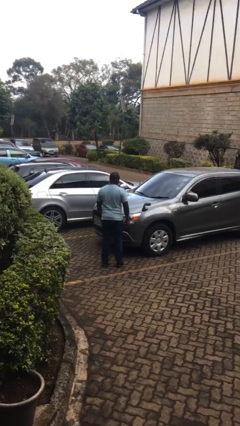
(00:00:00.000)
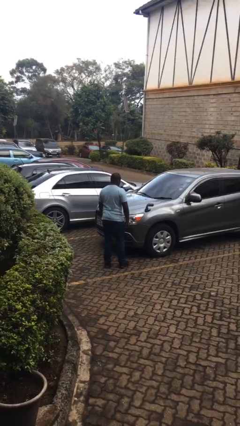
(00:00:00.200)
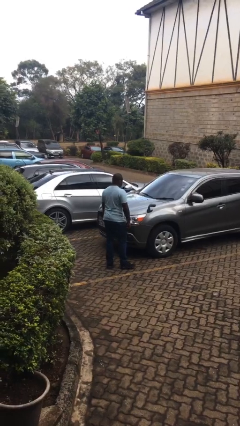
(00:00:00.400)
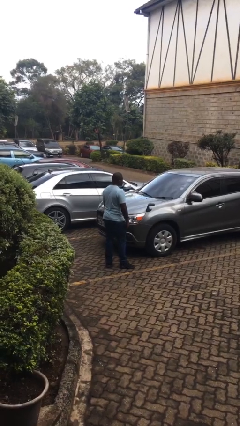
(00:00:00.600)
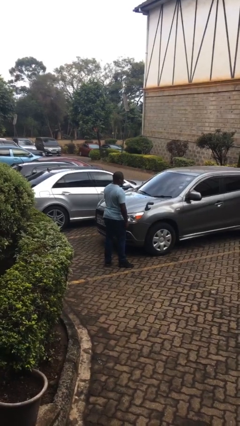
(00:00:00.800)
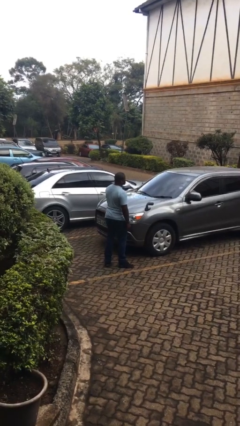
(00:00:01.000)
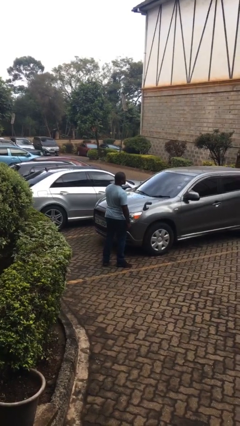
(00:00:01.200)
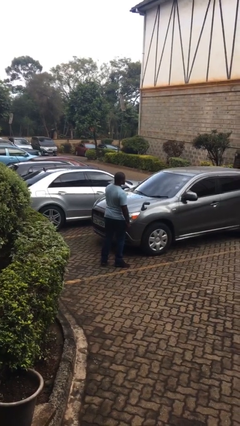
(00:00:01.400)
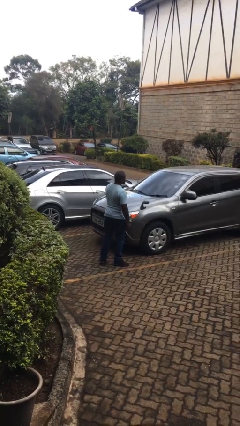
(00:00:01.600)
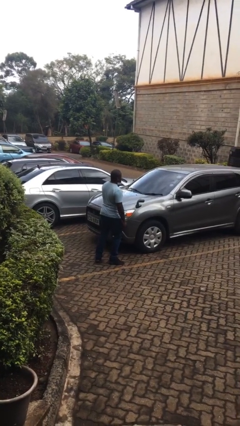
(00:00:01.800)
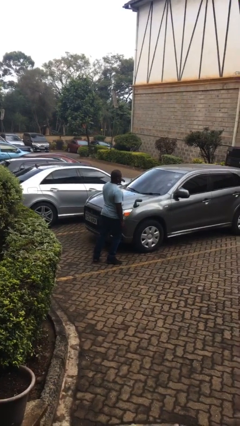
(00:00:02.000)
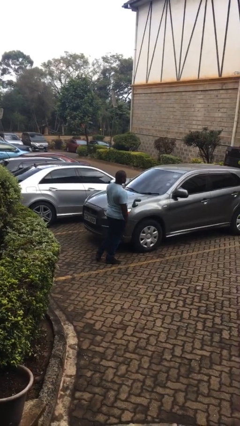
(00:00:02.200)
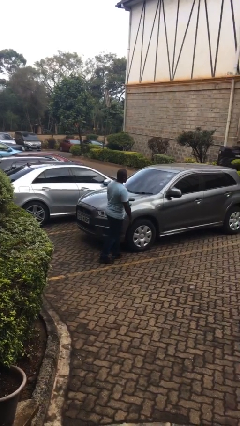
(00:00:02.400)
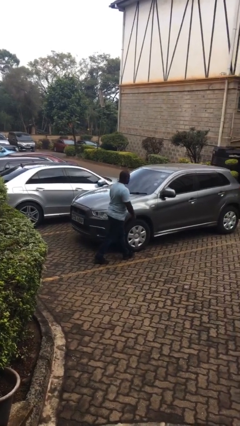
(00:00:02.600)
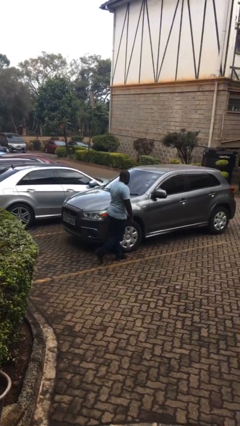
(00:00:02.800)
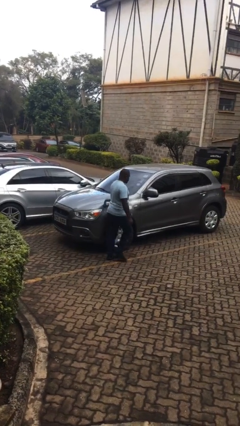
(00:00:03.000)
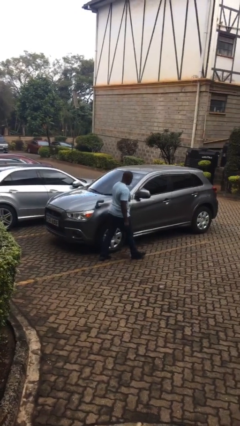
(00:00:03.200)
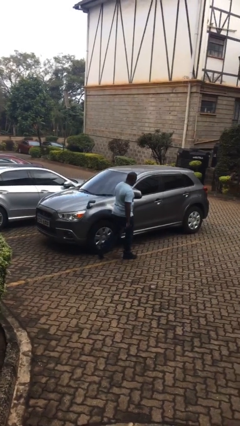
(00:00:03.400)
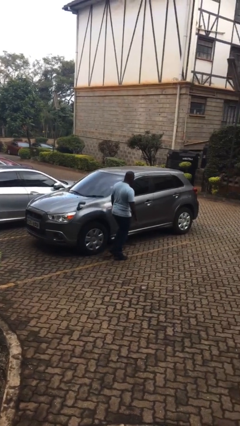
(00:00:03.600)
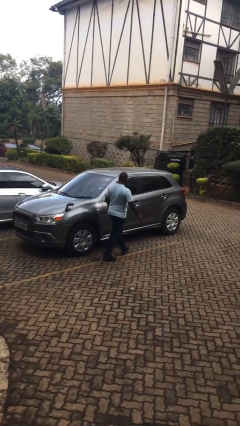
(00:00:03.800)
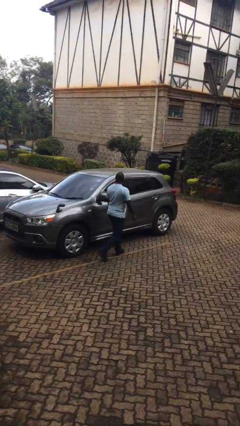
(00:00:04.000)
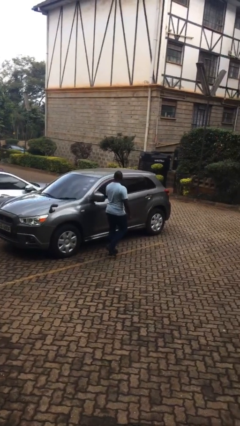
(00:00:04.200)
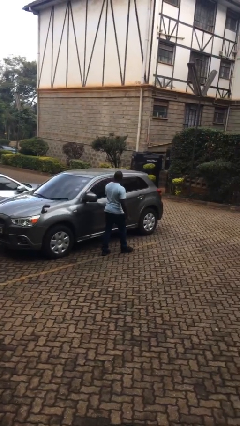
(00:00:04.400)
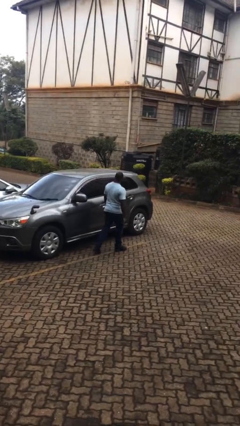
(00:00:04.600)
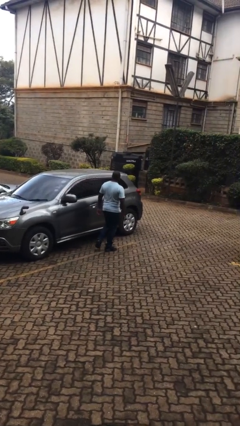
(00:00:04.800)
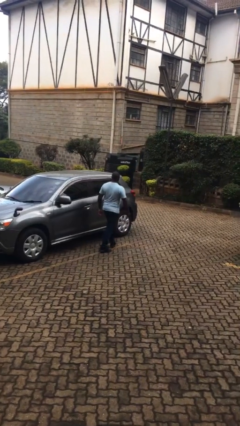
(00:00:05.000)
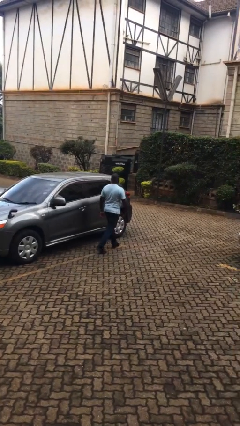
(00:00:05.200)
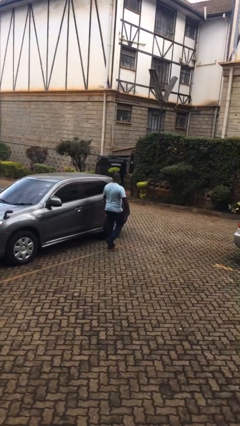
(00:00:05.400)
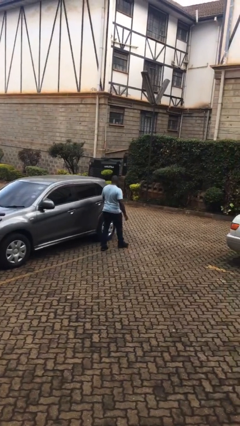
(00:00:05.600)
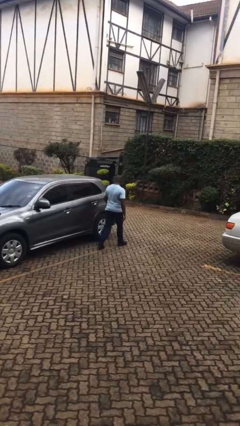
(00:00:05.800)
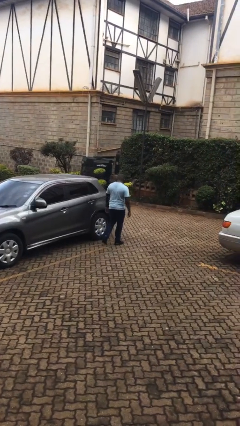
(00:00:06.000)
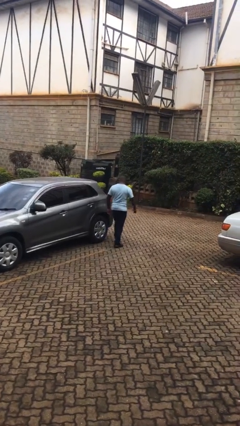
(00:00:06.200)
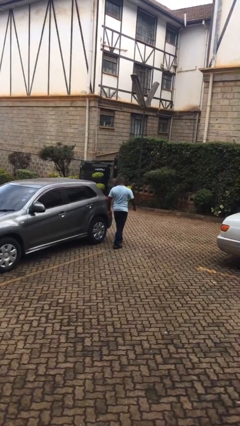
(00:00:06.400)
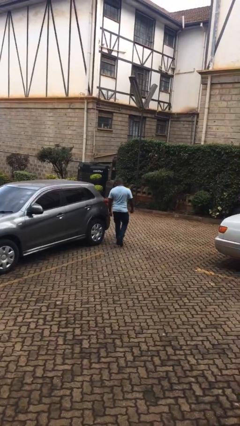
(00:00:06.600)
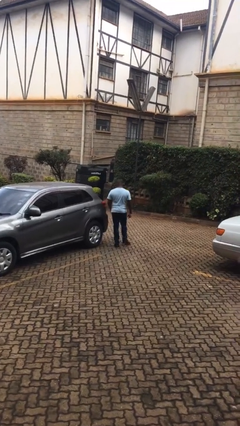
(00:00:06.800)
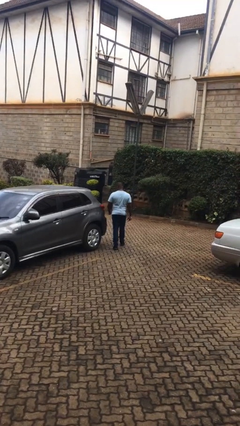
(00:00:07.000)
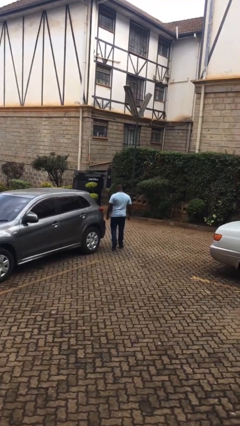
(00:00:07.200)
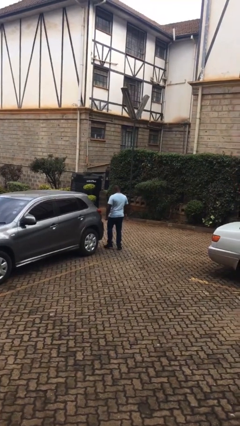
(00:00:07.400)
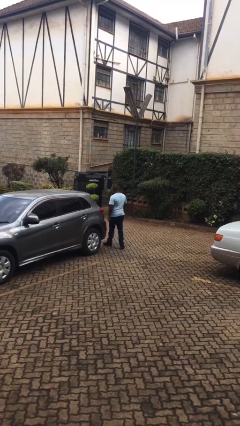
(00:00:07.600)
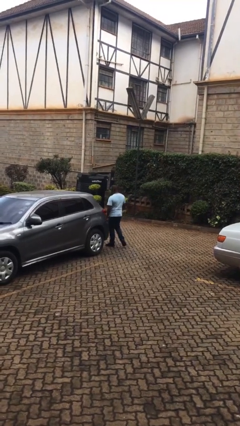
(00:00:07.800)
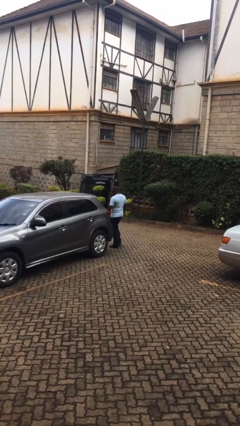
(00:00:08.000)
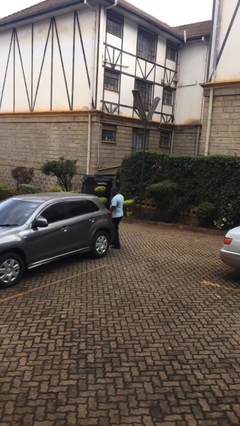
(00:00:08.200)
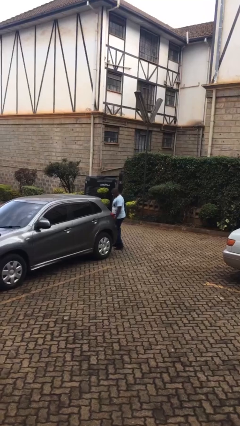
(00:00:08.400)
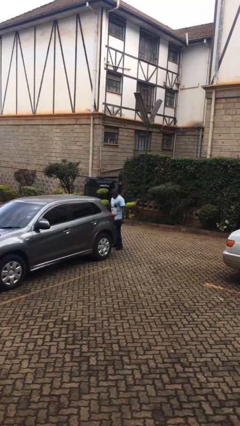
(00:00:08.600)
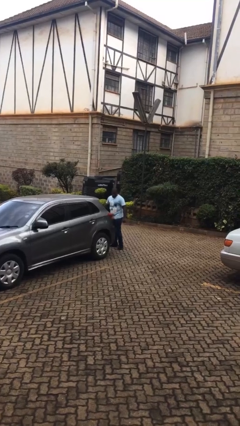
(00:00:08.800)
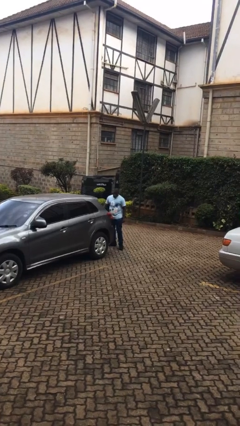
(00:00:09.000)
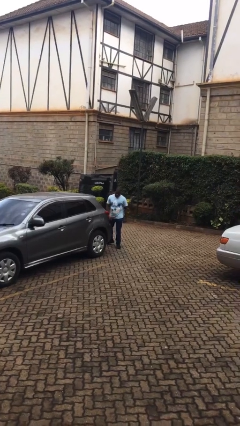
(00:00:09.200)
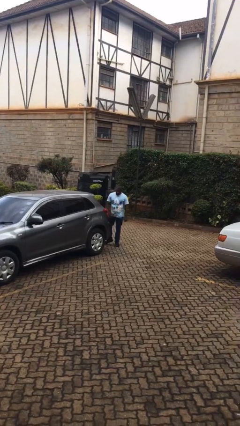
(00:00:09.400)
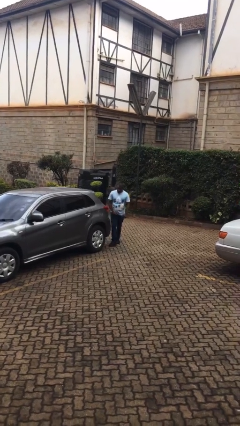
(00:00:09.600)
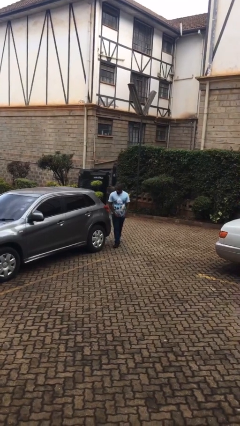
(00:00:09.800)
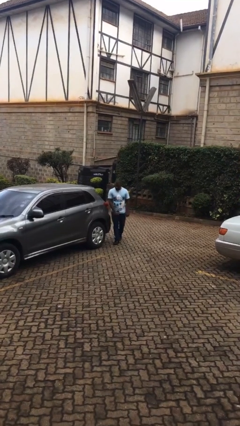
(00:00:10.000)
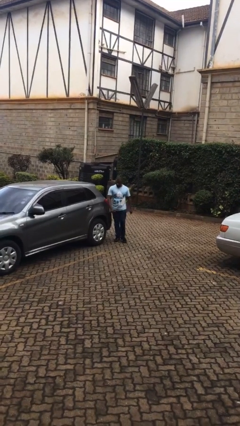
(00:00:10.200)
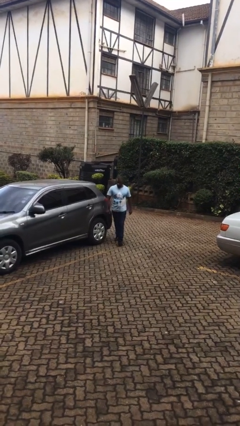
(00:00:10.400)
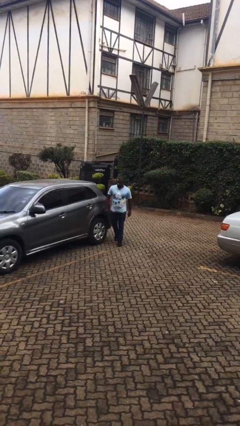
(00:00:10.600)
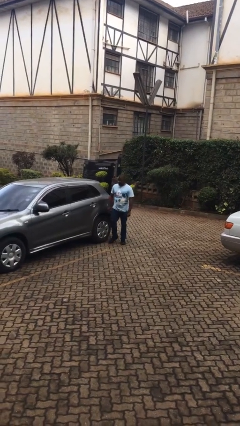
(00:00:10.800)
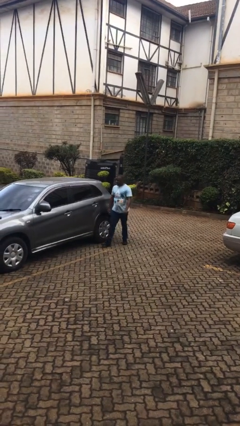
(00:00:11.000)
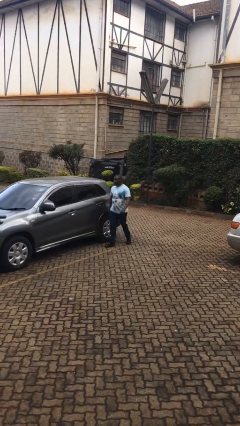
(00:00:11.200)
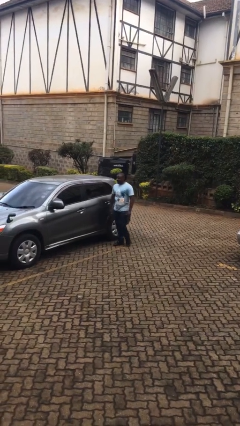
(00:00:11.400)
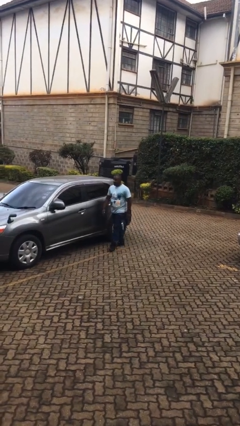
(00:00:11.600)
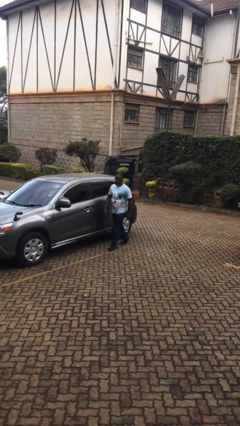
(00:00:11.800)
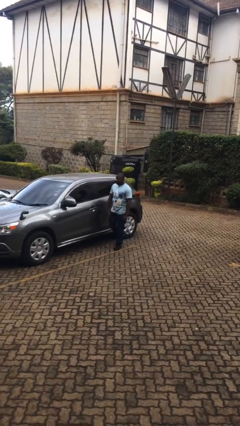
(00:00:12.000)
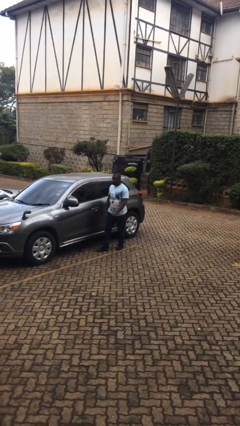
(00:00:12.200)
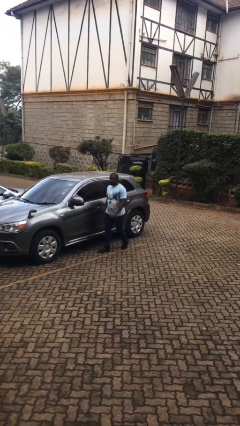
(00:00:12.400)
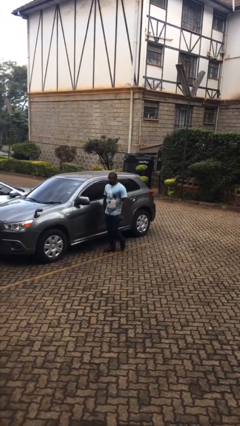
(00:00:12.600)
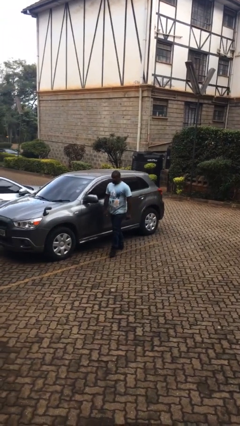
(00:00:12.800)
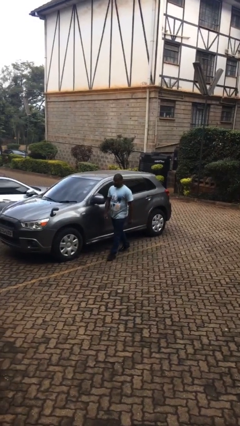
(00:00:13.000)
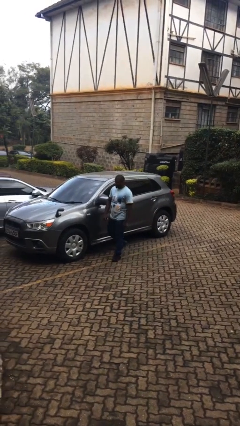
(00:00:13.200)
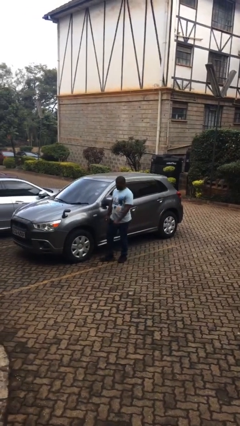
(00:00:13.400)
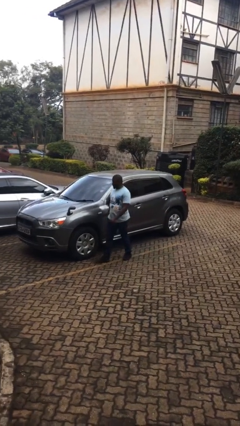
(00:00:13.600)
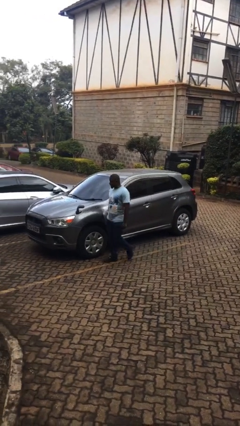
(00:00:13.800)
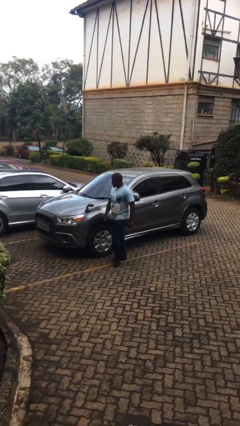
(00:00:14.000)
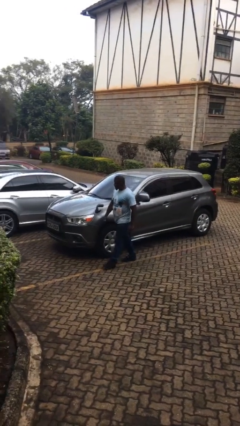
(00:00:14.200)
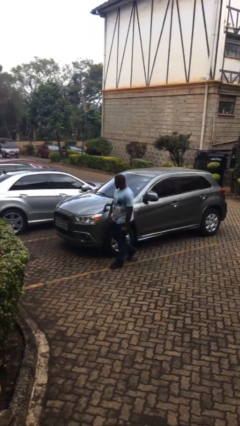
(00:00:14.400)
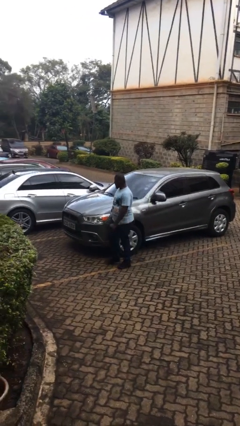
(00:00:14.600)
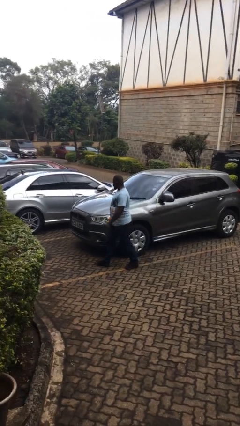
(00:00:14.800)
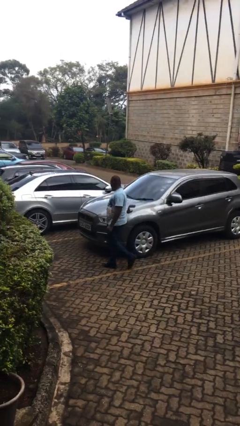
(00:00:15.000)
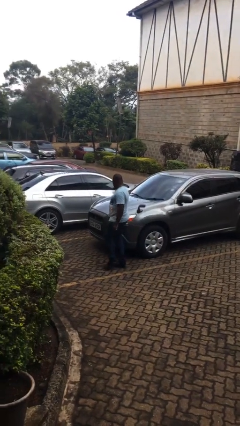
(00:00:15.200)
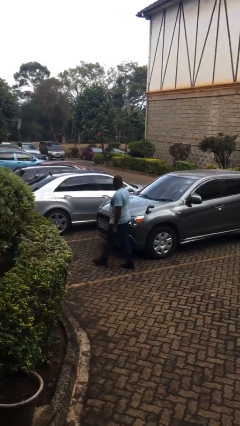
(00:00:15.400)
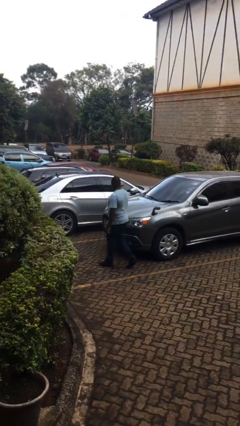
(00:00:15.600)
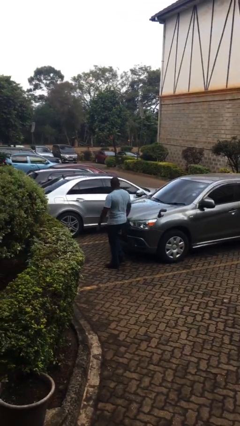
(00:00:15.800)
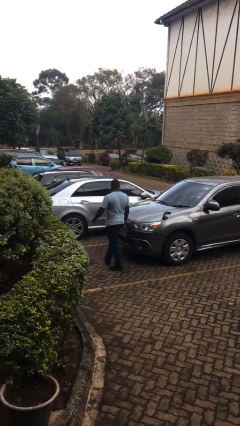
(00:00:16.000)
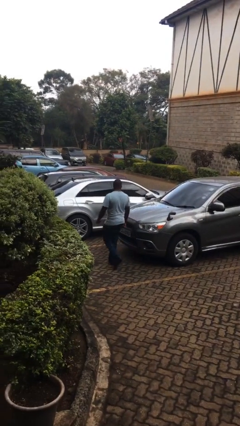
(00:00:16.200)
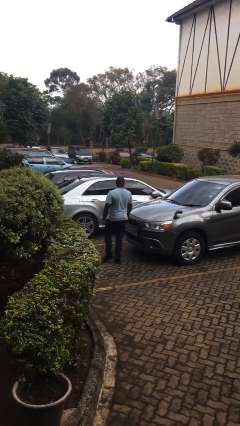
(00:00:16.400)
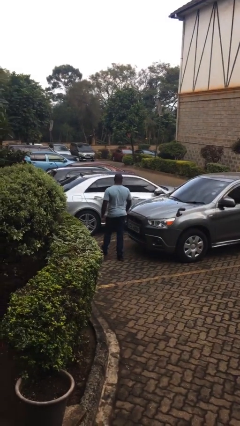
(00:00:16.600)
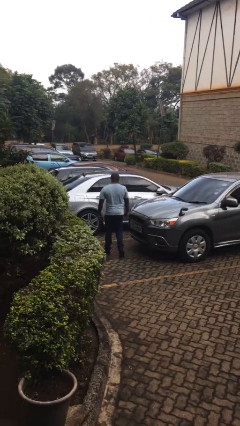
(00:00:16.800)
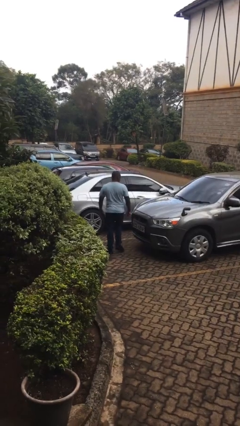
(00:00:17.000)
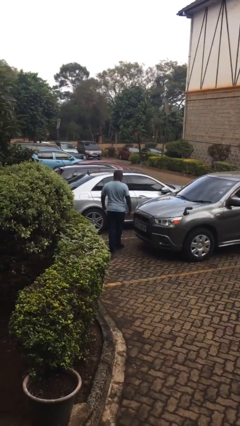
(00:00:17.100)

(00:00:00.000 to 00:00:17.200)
person walks around car

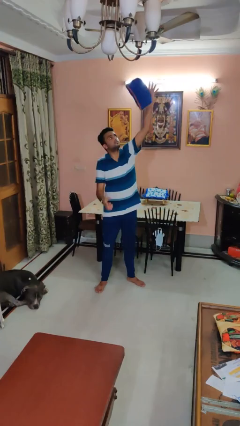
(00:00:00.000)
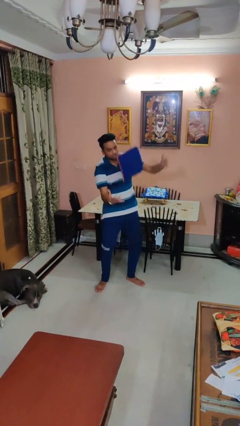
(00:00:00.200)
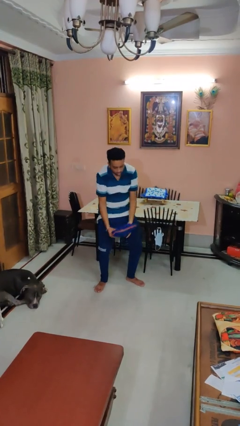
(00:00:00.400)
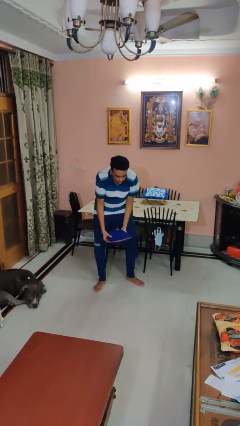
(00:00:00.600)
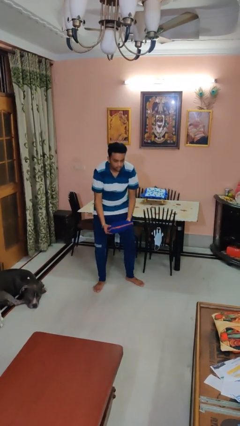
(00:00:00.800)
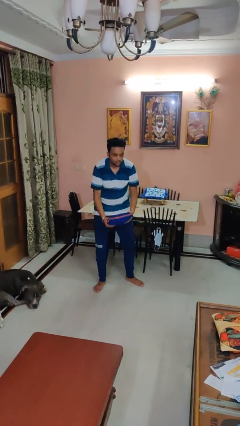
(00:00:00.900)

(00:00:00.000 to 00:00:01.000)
person catches dropped object
